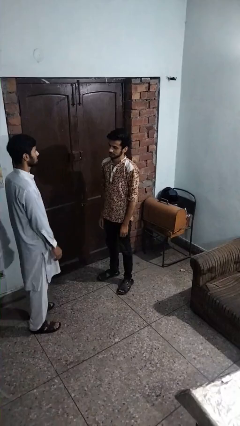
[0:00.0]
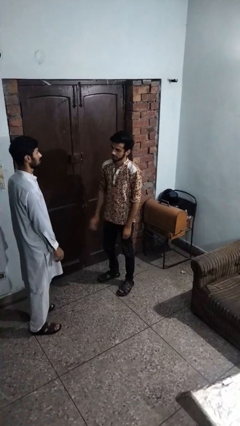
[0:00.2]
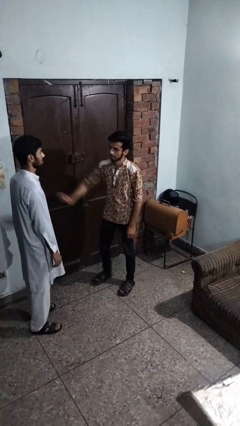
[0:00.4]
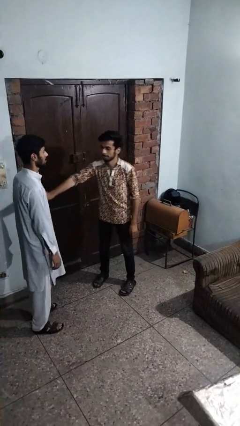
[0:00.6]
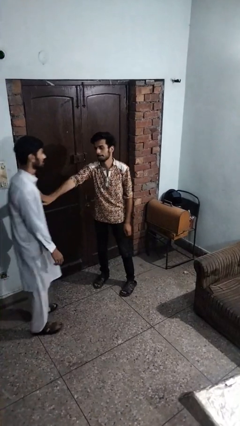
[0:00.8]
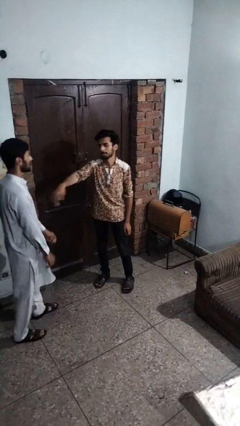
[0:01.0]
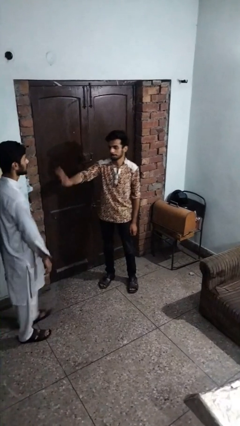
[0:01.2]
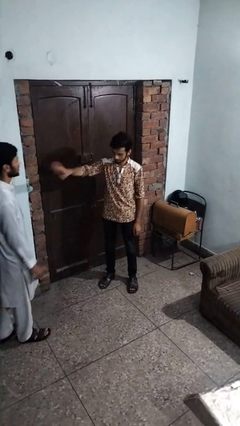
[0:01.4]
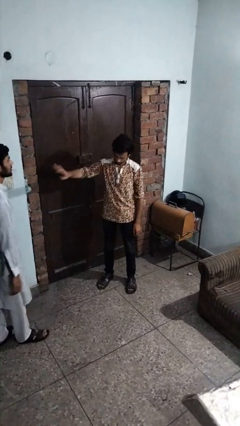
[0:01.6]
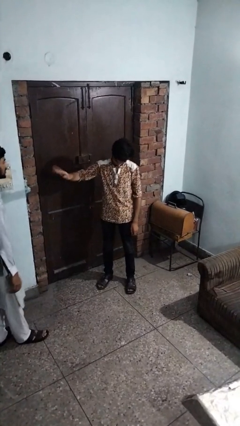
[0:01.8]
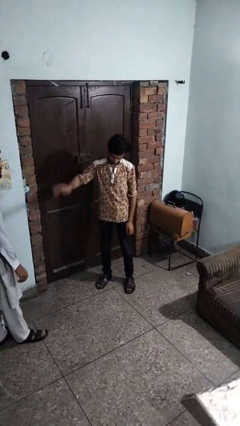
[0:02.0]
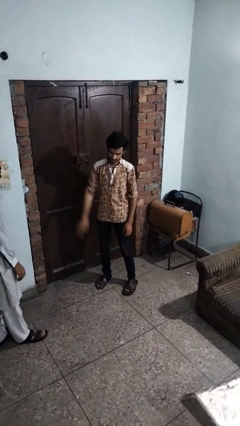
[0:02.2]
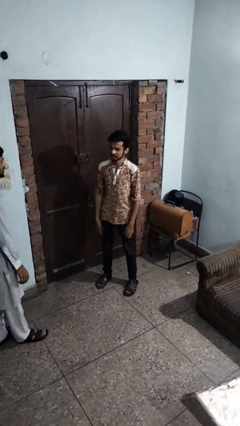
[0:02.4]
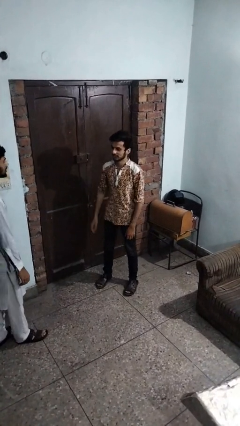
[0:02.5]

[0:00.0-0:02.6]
person shoves person

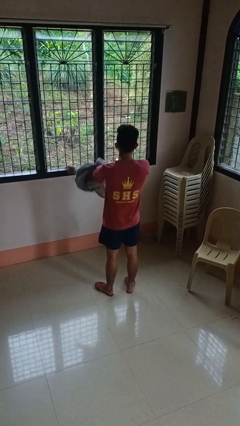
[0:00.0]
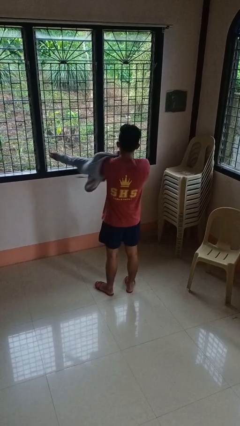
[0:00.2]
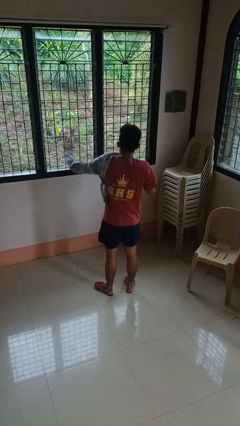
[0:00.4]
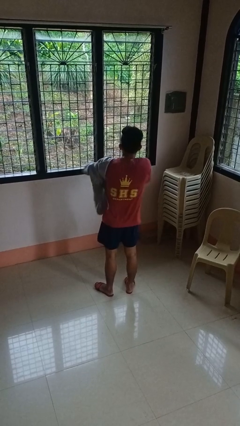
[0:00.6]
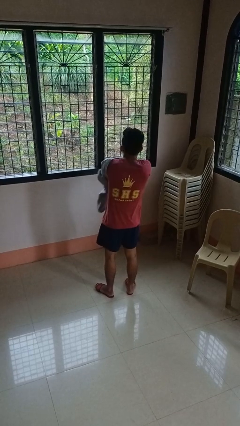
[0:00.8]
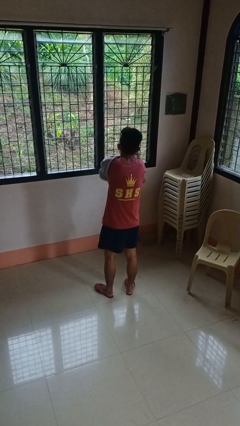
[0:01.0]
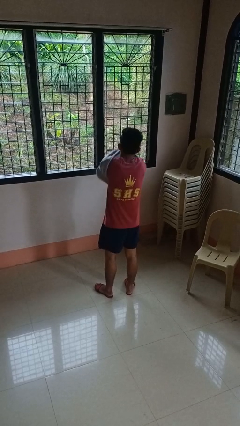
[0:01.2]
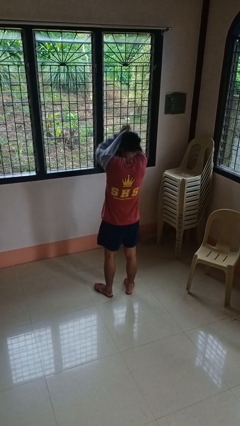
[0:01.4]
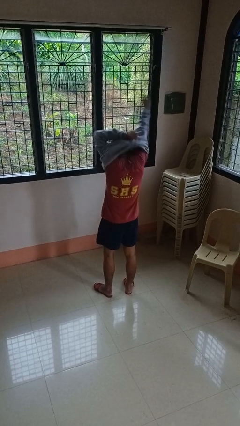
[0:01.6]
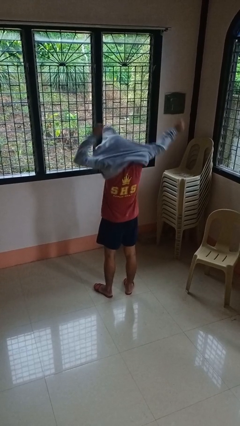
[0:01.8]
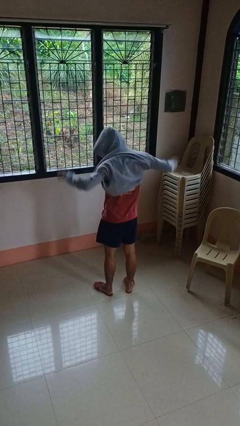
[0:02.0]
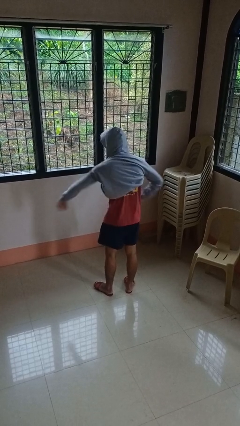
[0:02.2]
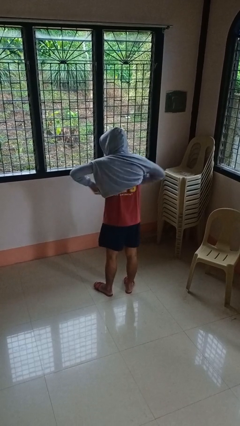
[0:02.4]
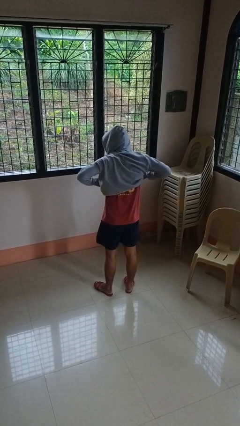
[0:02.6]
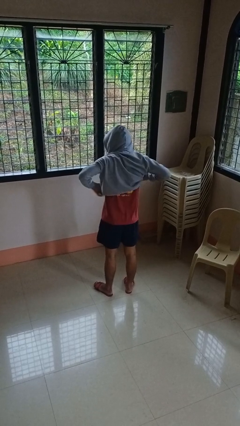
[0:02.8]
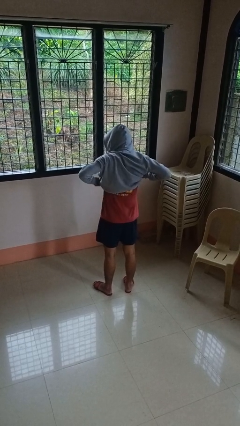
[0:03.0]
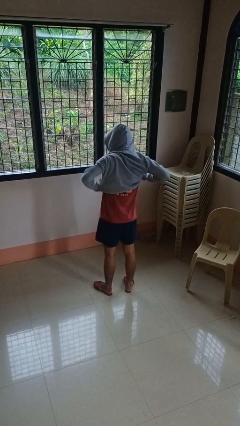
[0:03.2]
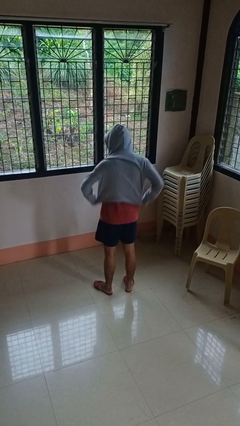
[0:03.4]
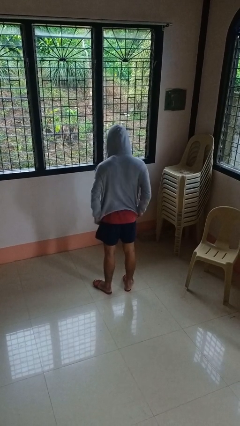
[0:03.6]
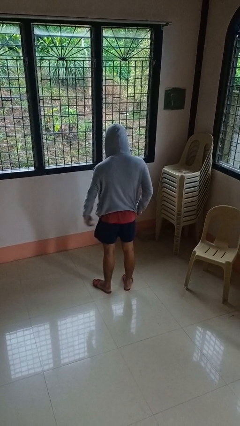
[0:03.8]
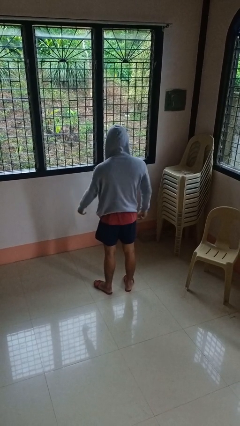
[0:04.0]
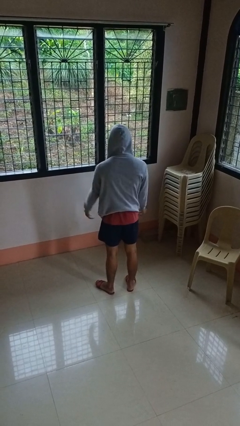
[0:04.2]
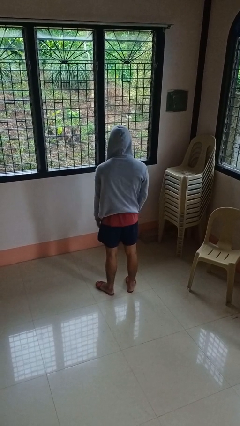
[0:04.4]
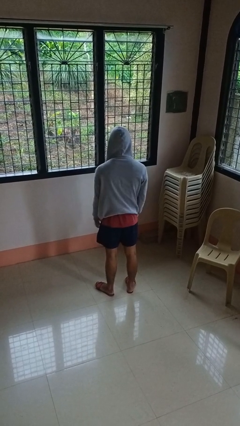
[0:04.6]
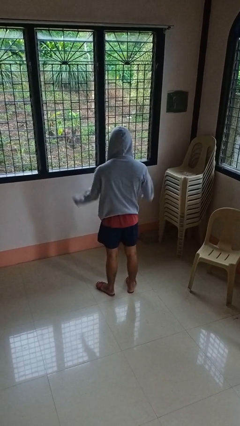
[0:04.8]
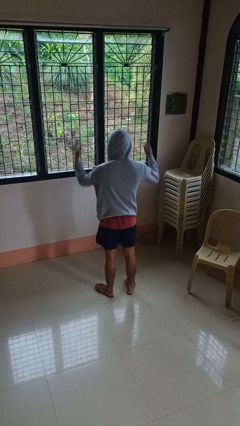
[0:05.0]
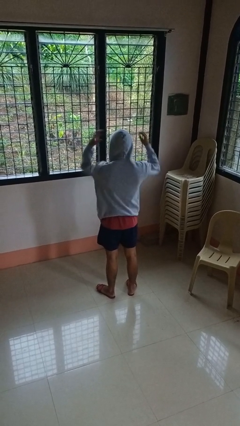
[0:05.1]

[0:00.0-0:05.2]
person puts on hoodie

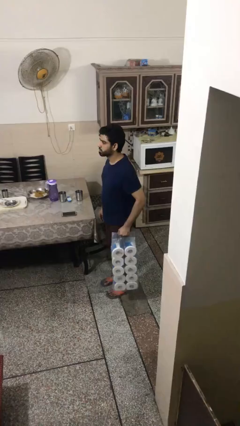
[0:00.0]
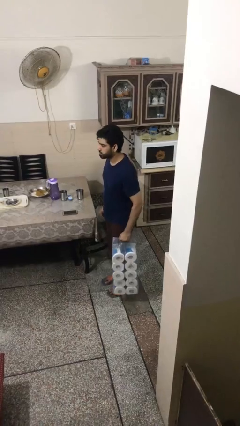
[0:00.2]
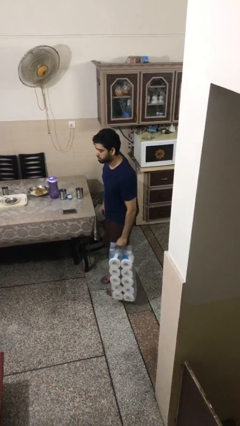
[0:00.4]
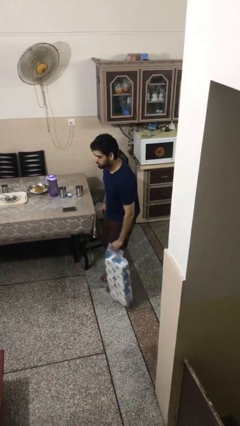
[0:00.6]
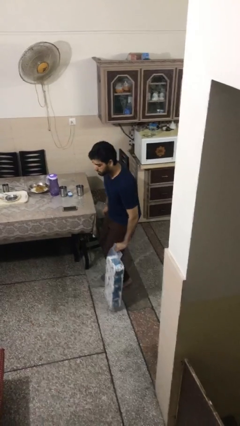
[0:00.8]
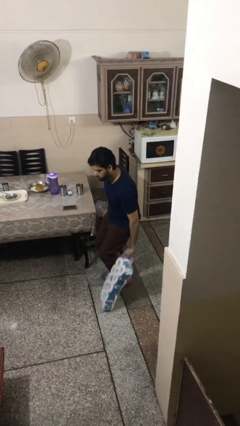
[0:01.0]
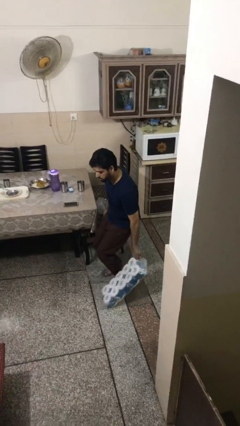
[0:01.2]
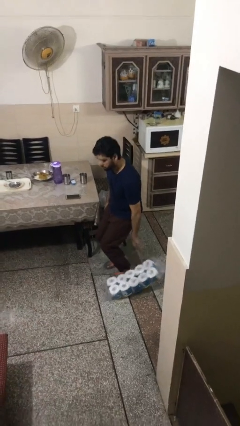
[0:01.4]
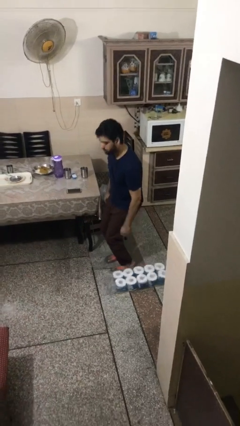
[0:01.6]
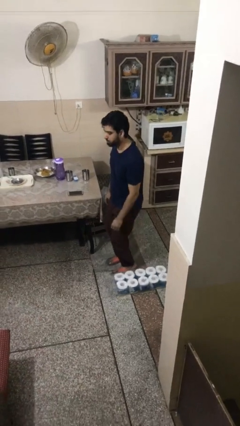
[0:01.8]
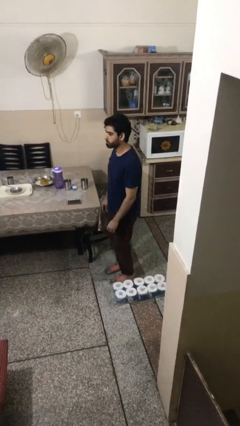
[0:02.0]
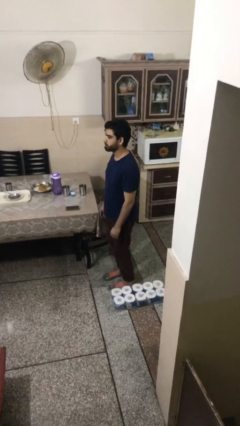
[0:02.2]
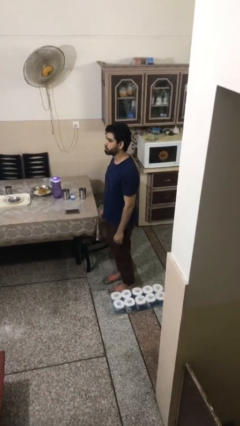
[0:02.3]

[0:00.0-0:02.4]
person puts down object on floor

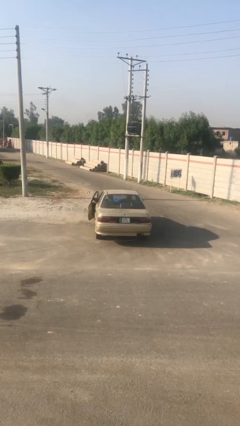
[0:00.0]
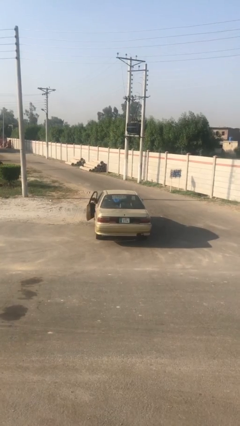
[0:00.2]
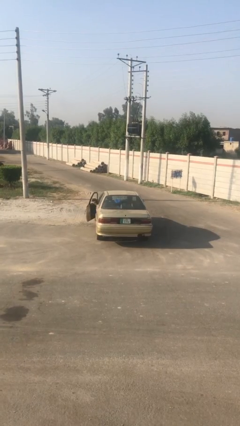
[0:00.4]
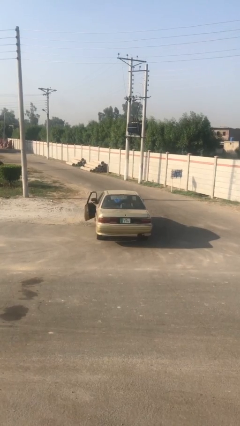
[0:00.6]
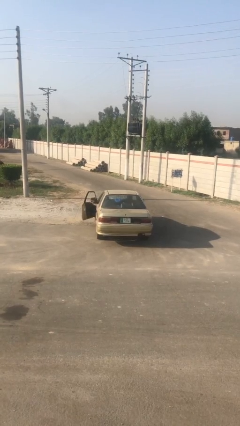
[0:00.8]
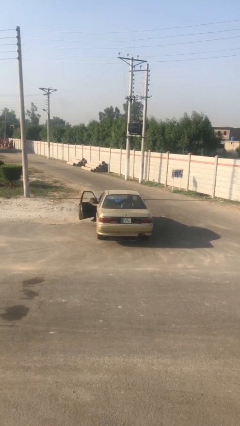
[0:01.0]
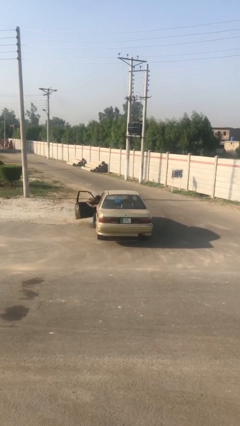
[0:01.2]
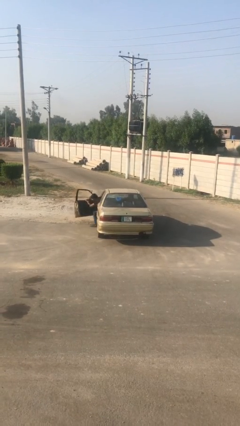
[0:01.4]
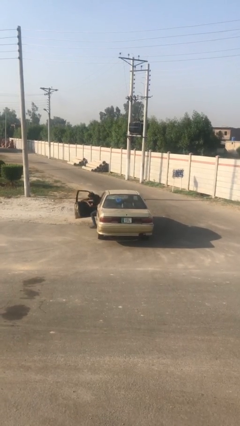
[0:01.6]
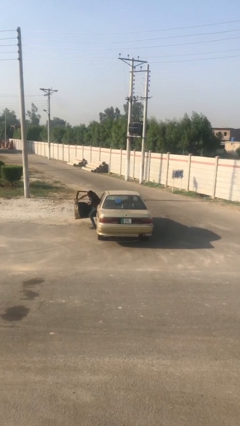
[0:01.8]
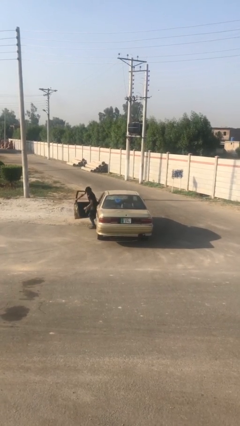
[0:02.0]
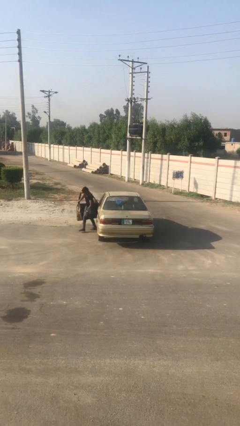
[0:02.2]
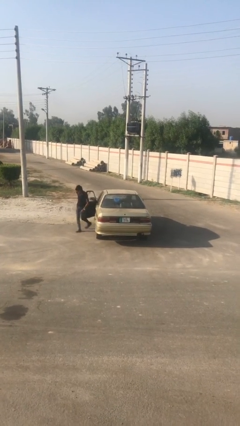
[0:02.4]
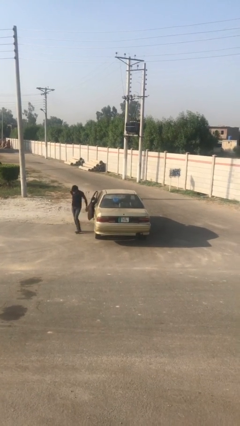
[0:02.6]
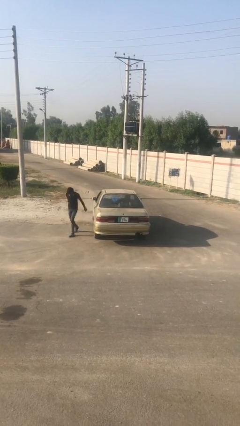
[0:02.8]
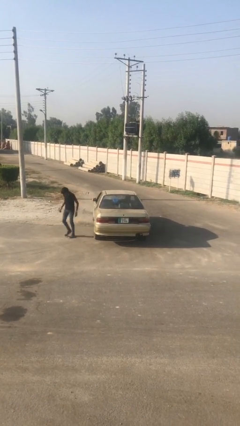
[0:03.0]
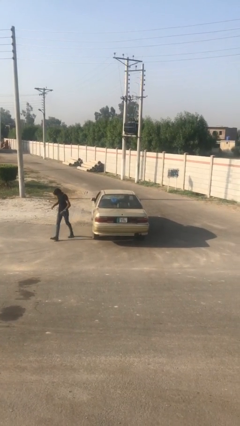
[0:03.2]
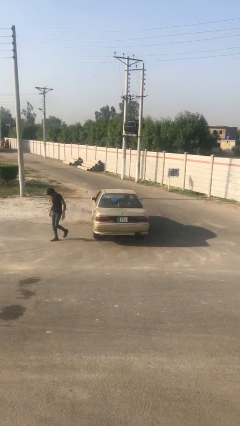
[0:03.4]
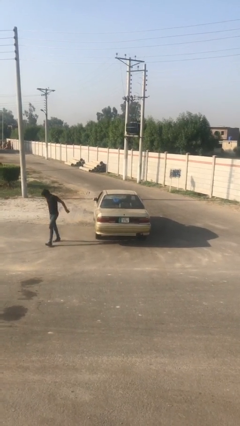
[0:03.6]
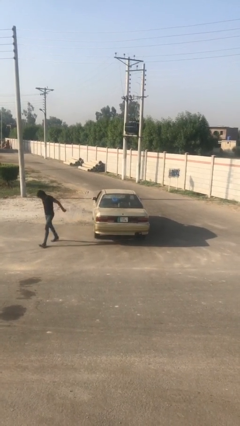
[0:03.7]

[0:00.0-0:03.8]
car drops off person

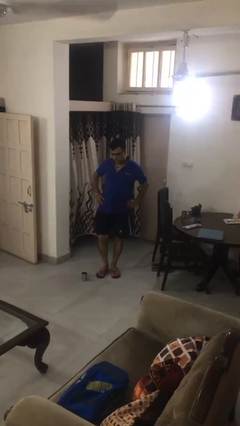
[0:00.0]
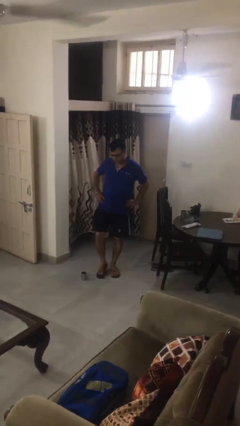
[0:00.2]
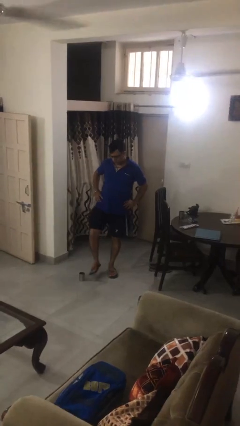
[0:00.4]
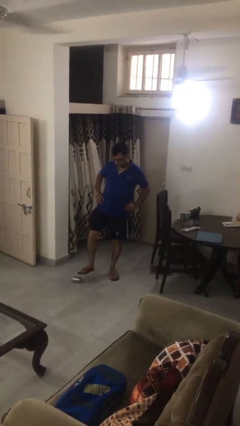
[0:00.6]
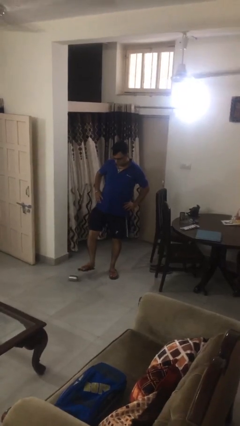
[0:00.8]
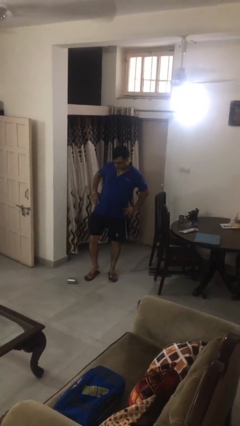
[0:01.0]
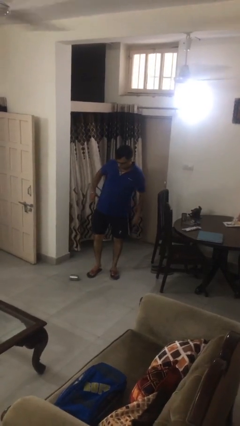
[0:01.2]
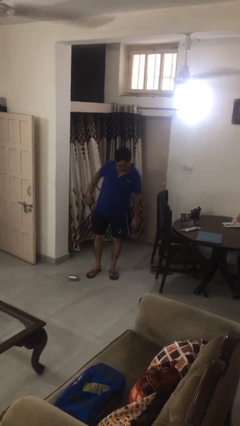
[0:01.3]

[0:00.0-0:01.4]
person spills on floor

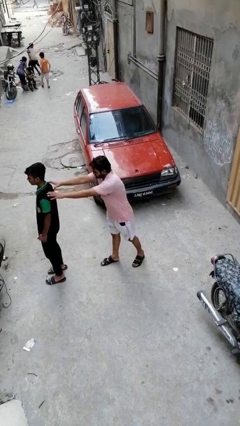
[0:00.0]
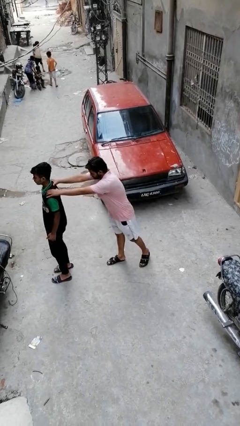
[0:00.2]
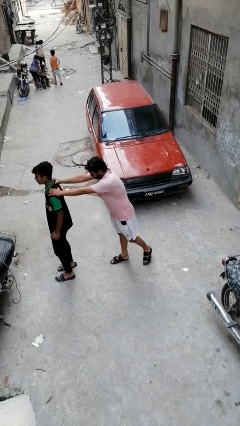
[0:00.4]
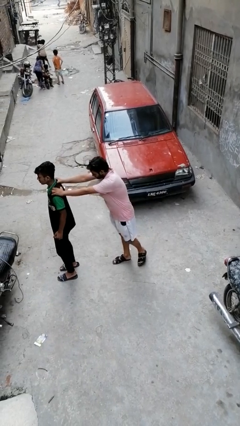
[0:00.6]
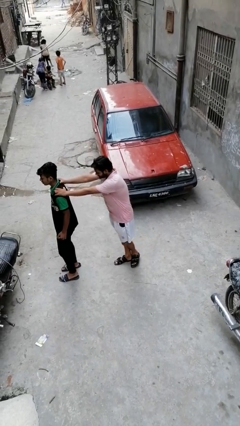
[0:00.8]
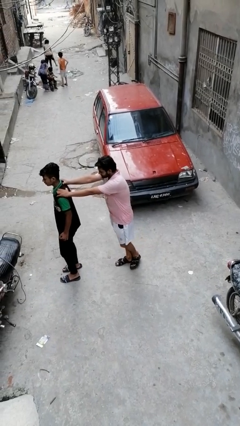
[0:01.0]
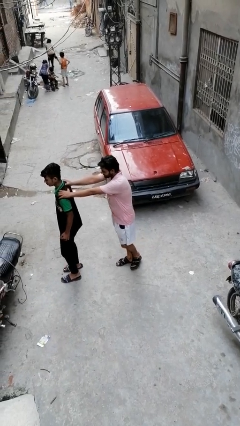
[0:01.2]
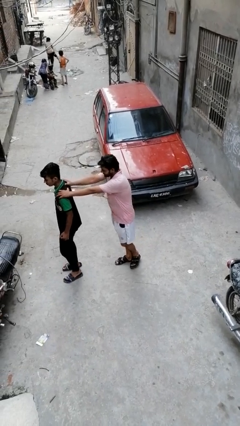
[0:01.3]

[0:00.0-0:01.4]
person grabs person by shoulder

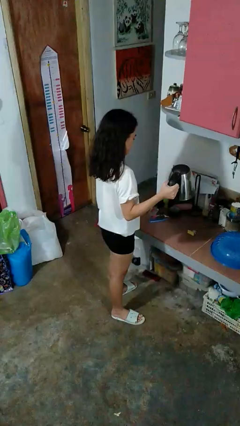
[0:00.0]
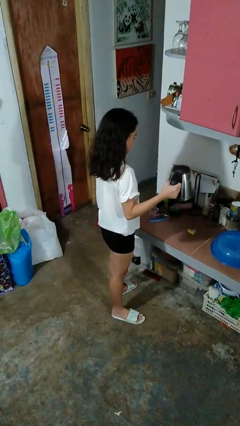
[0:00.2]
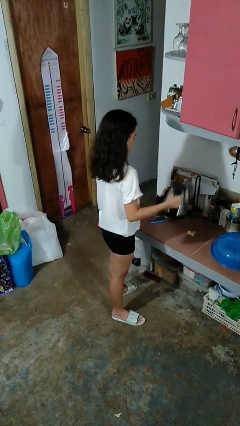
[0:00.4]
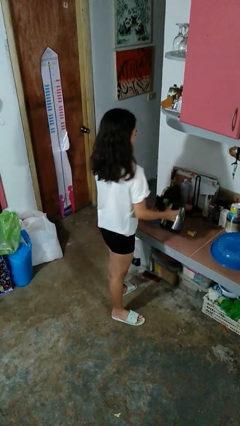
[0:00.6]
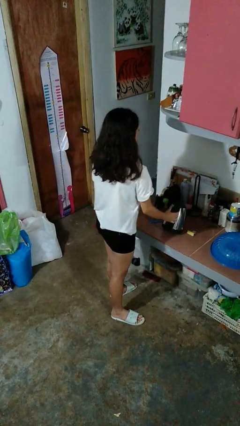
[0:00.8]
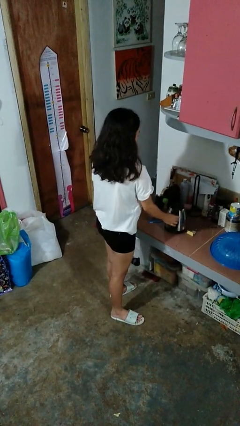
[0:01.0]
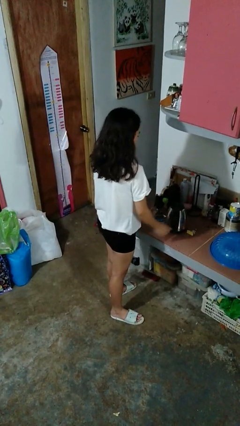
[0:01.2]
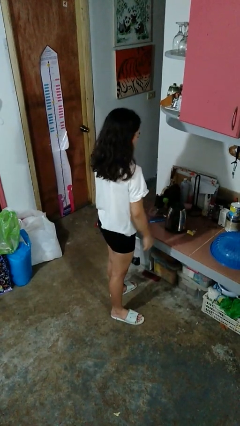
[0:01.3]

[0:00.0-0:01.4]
person puts down object on countertop
